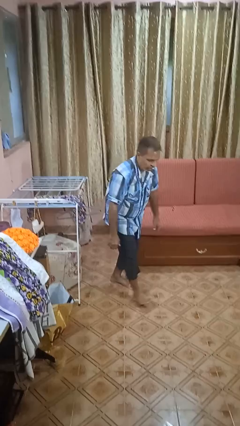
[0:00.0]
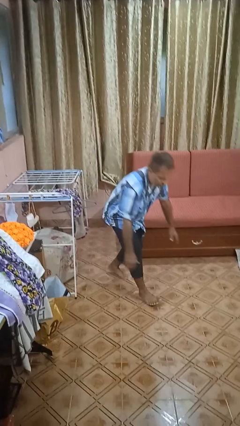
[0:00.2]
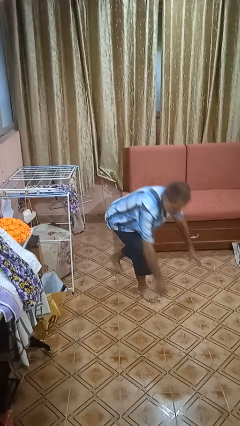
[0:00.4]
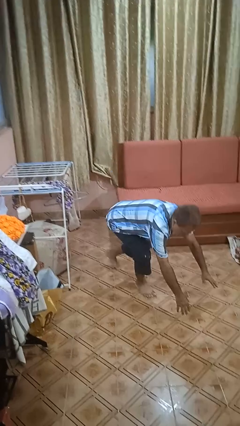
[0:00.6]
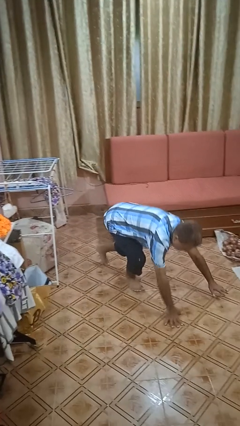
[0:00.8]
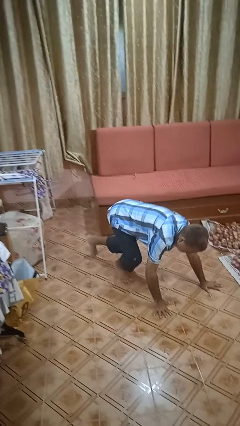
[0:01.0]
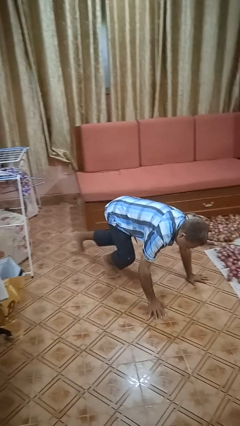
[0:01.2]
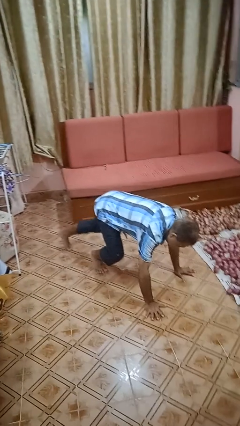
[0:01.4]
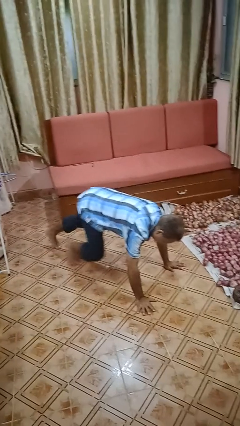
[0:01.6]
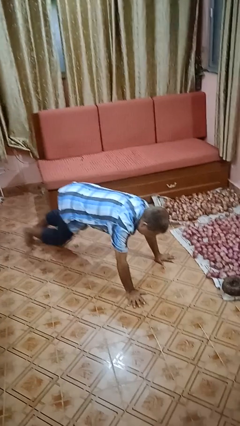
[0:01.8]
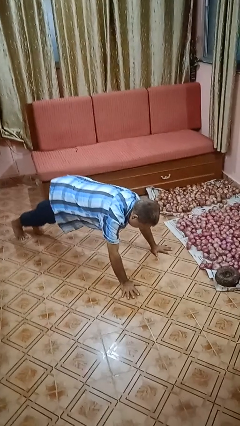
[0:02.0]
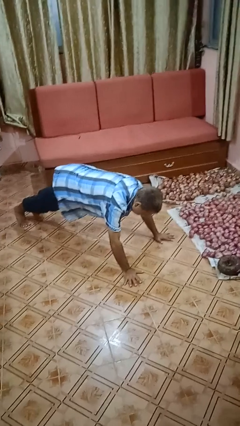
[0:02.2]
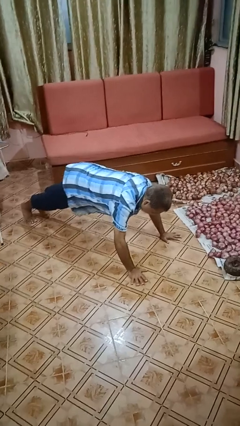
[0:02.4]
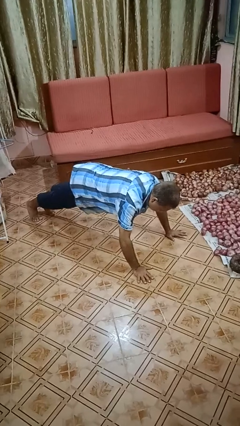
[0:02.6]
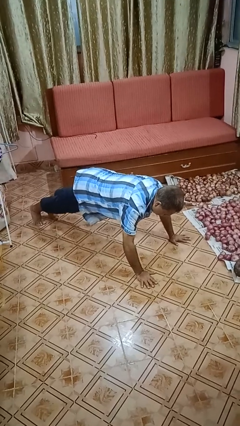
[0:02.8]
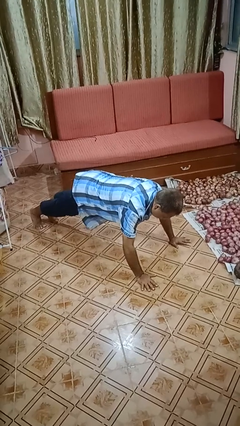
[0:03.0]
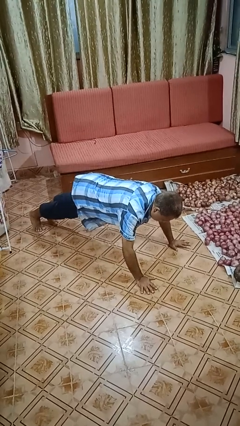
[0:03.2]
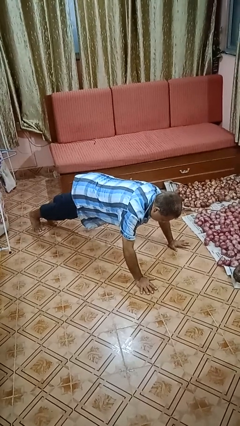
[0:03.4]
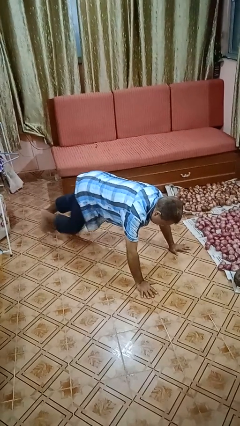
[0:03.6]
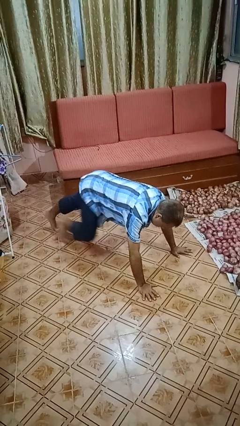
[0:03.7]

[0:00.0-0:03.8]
person exercises with plank

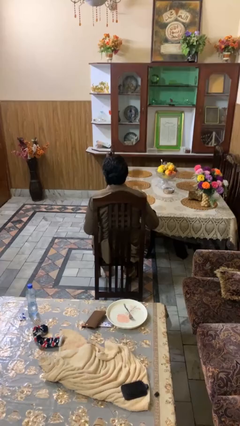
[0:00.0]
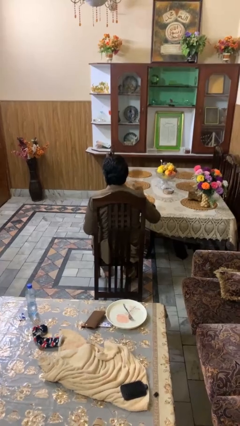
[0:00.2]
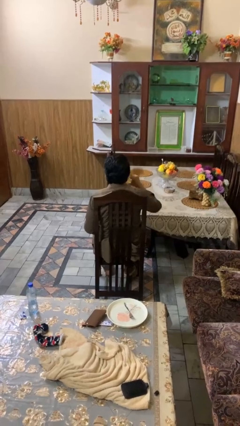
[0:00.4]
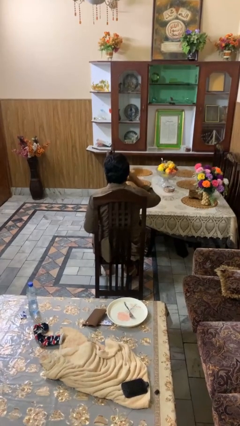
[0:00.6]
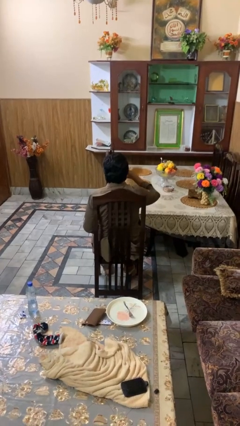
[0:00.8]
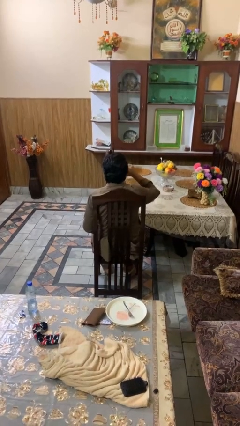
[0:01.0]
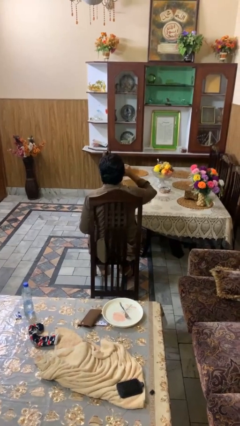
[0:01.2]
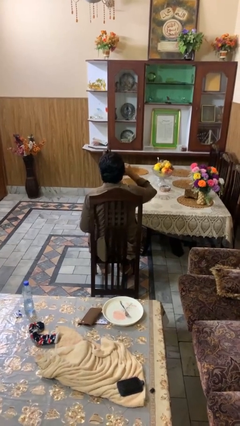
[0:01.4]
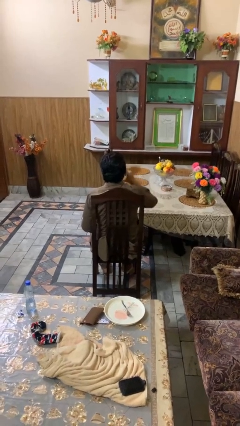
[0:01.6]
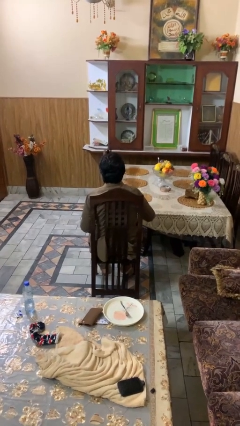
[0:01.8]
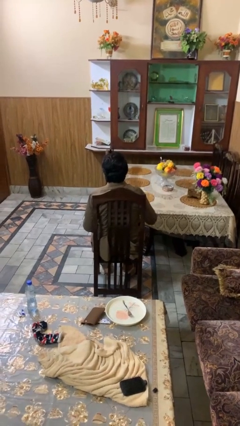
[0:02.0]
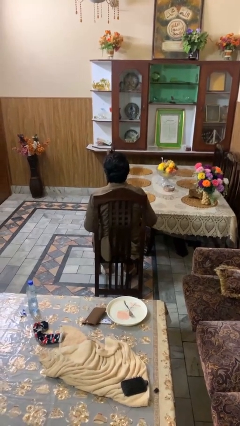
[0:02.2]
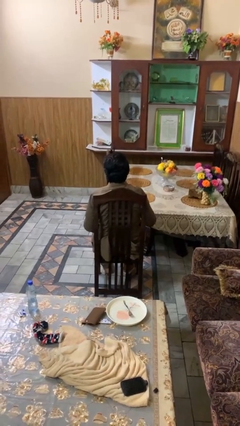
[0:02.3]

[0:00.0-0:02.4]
person drinks from shotglass

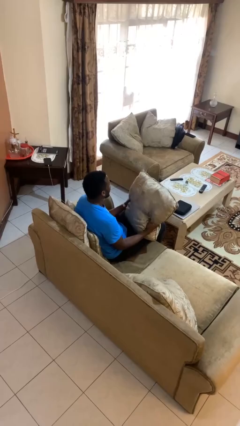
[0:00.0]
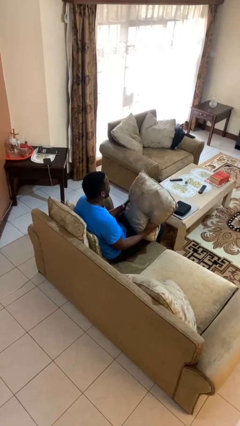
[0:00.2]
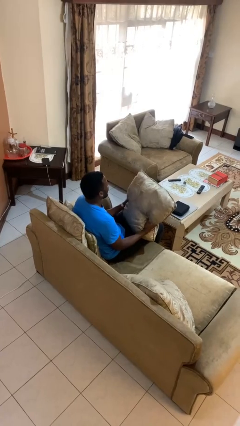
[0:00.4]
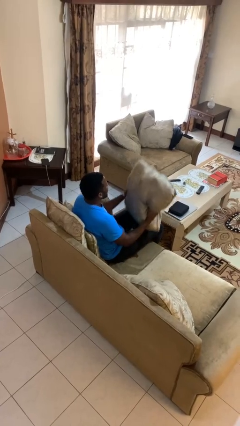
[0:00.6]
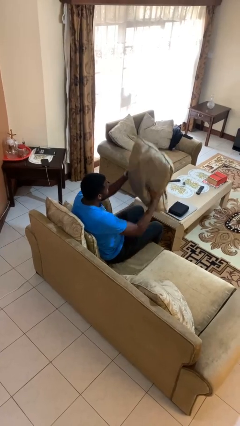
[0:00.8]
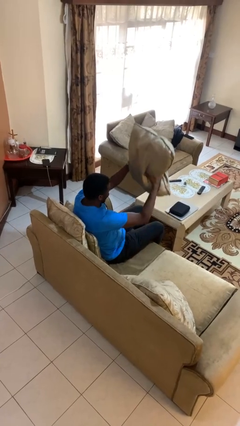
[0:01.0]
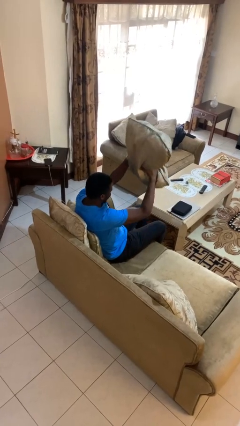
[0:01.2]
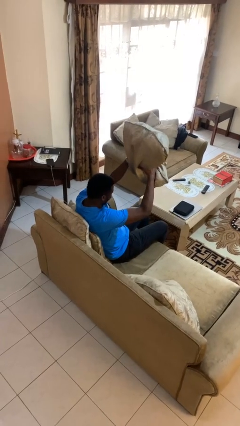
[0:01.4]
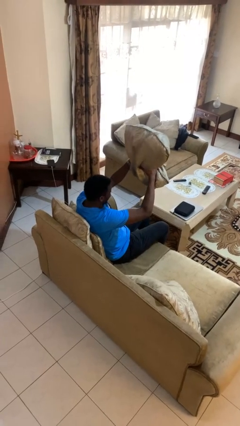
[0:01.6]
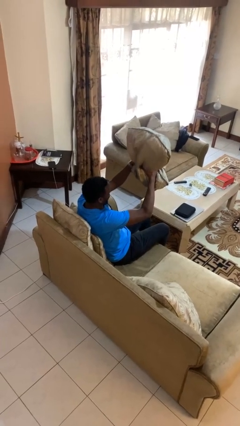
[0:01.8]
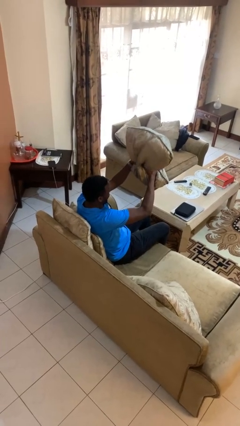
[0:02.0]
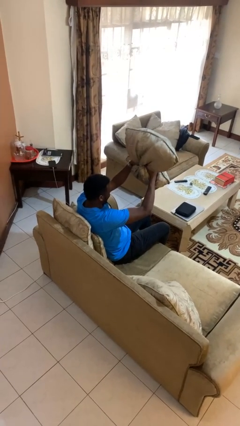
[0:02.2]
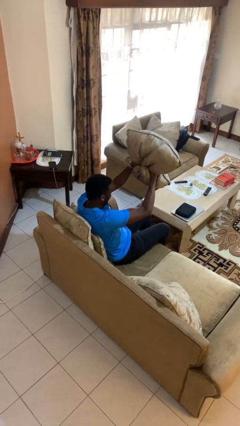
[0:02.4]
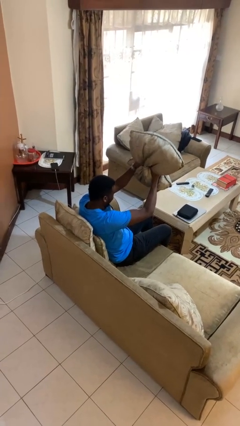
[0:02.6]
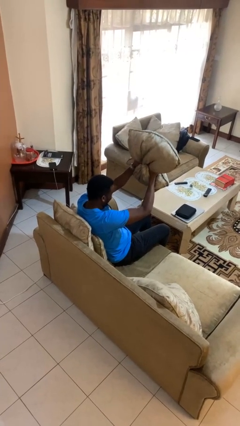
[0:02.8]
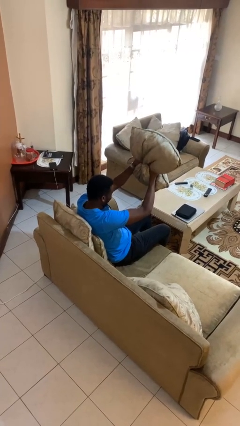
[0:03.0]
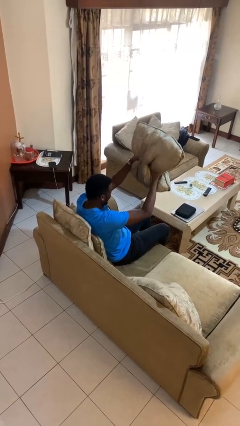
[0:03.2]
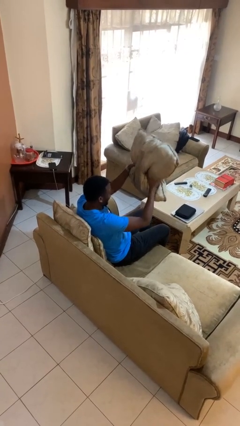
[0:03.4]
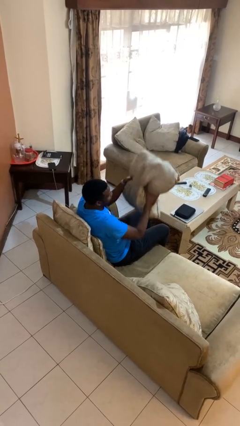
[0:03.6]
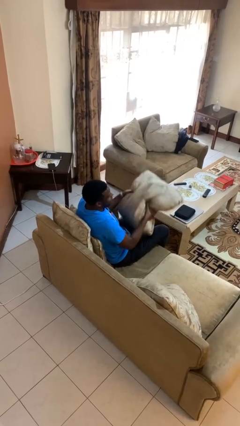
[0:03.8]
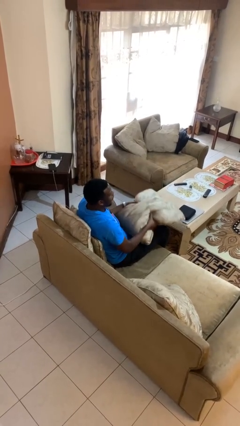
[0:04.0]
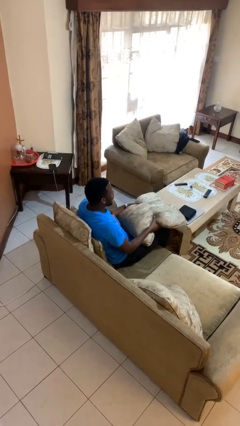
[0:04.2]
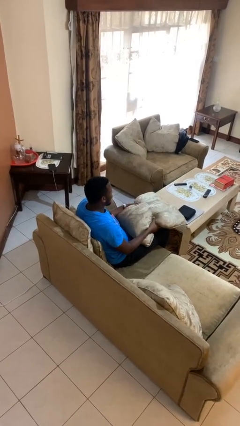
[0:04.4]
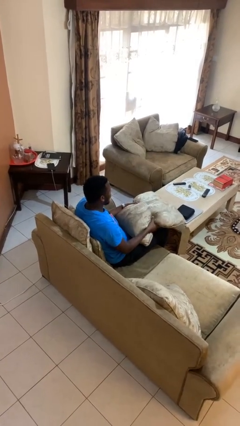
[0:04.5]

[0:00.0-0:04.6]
person squeezes object

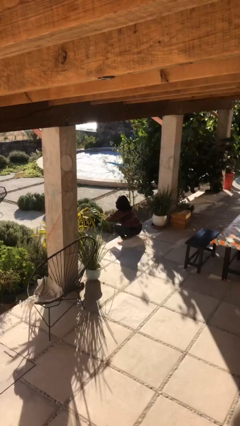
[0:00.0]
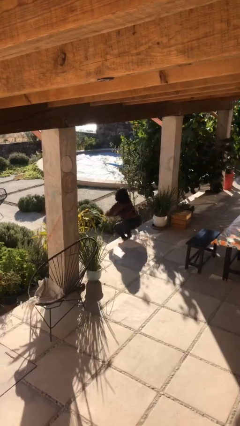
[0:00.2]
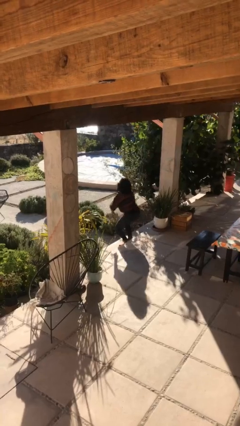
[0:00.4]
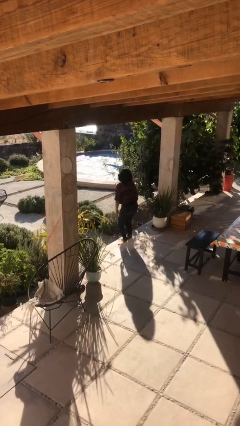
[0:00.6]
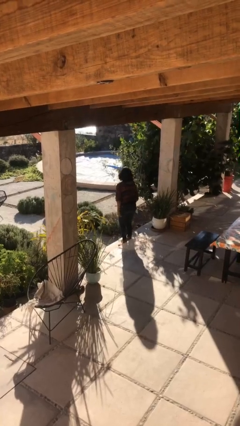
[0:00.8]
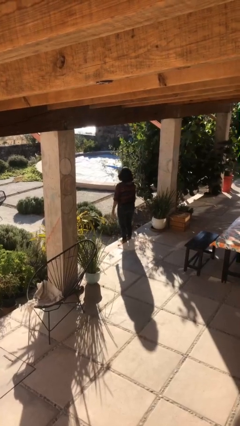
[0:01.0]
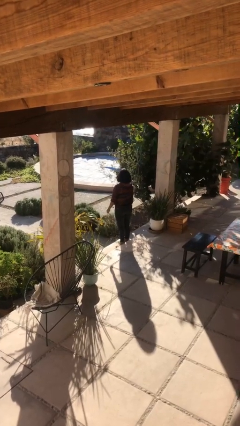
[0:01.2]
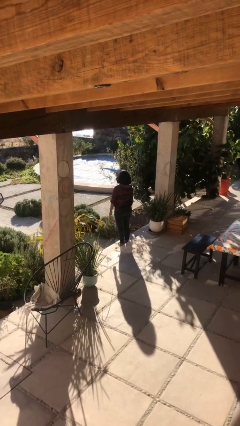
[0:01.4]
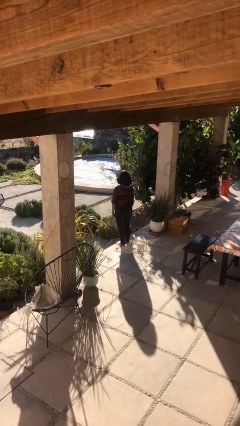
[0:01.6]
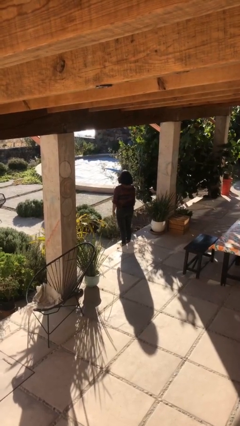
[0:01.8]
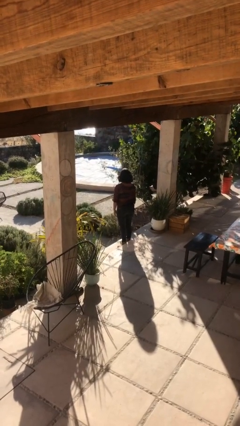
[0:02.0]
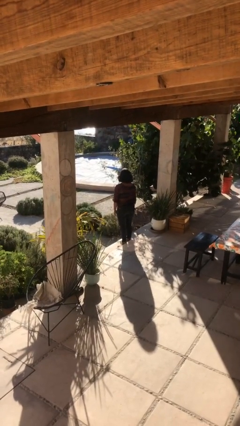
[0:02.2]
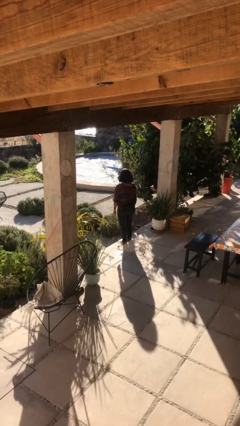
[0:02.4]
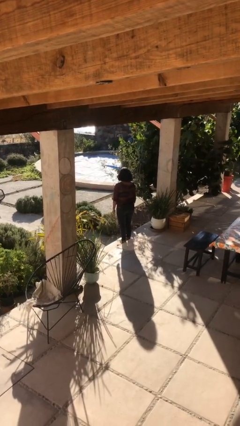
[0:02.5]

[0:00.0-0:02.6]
person stands up

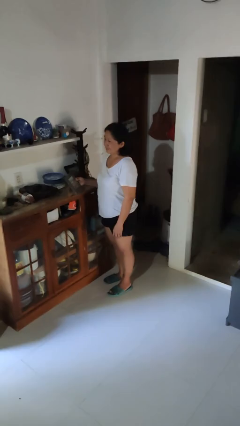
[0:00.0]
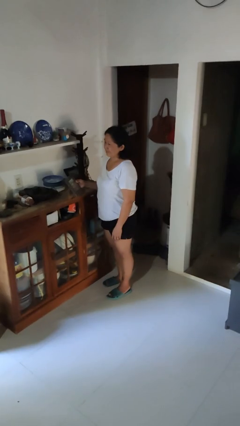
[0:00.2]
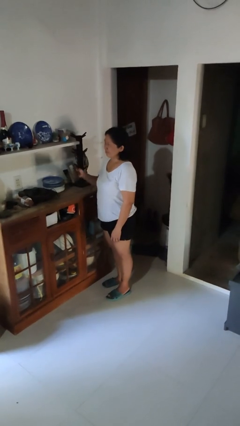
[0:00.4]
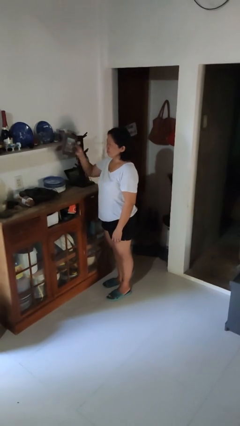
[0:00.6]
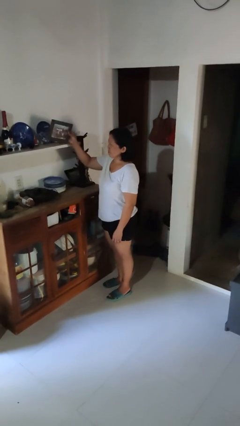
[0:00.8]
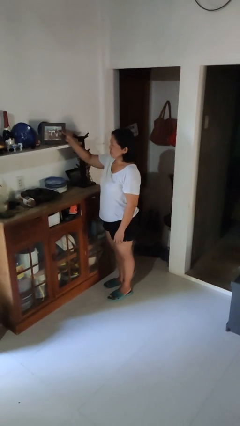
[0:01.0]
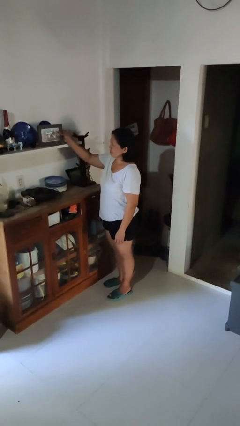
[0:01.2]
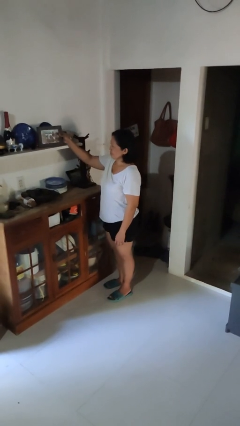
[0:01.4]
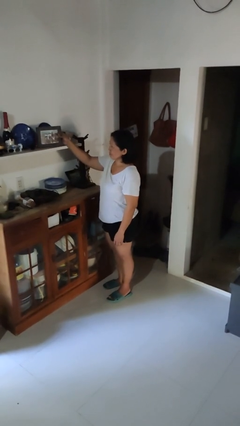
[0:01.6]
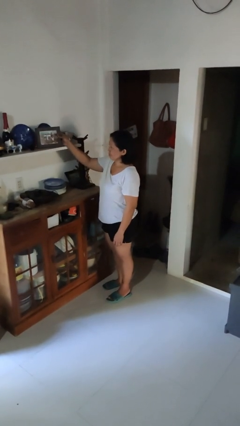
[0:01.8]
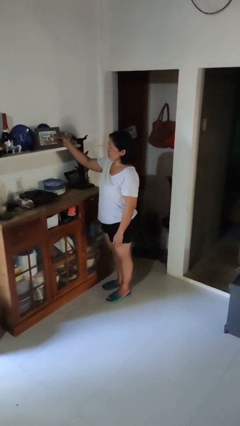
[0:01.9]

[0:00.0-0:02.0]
person puts down object on shelf

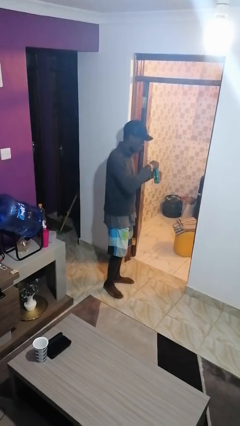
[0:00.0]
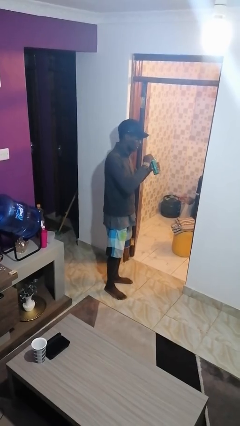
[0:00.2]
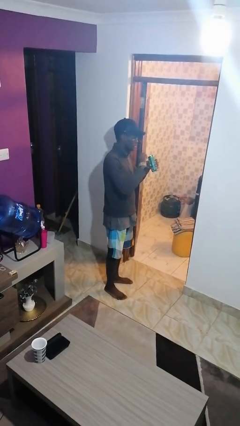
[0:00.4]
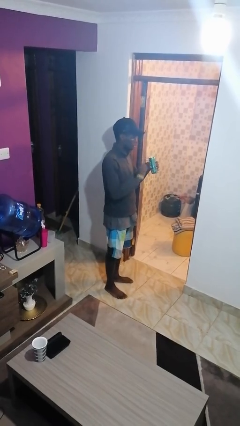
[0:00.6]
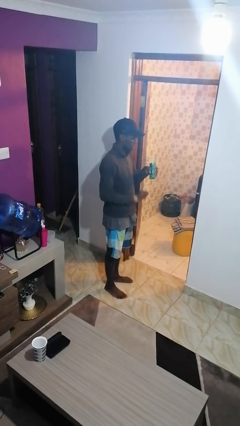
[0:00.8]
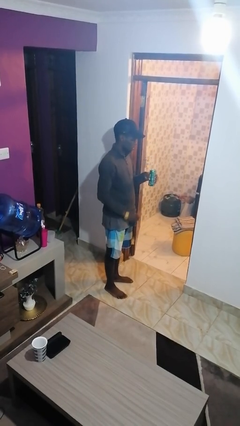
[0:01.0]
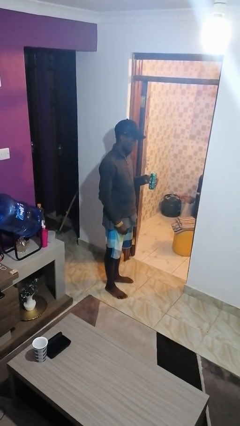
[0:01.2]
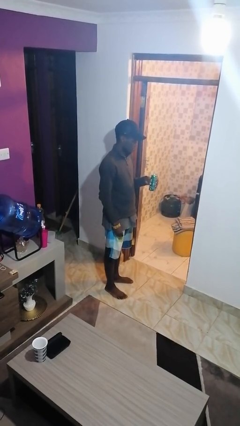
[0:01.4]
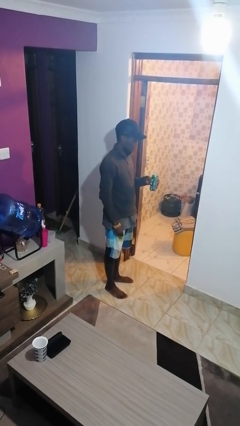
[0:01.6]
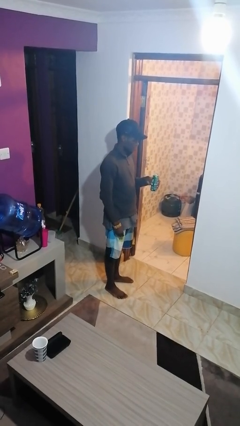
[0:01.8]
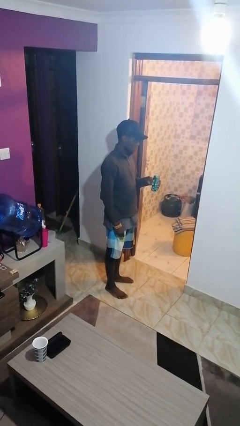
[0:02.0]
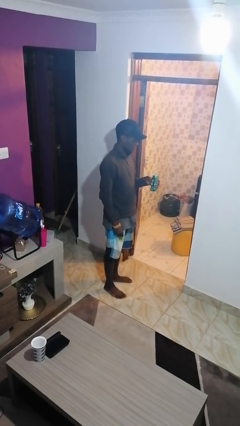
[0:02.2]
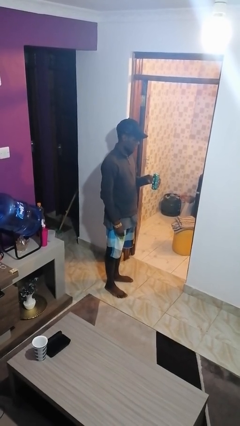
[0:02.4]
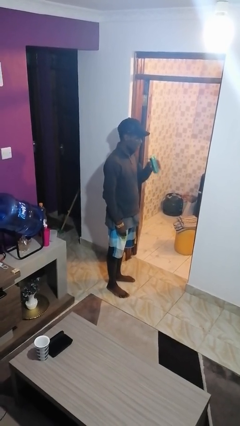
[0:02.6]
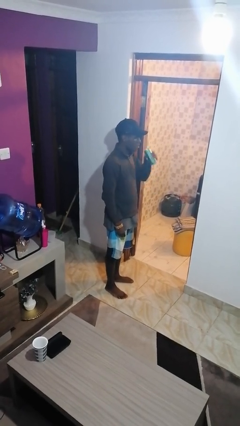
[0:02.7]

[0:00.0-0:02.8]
person opens beverage can
